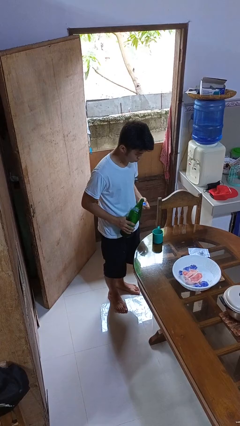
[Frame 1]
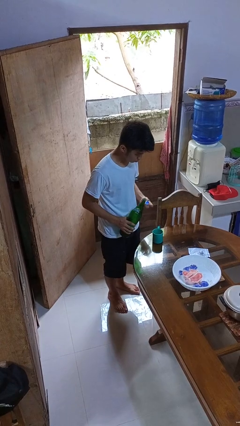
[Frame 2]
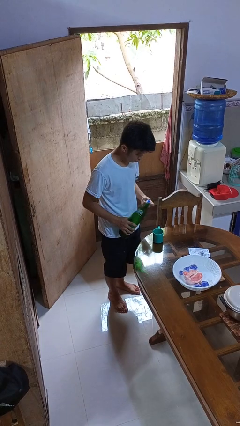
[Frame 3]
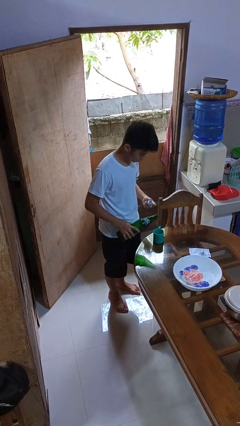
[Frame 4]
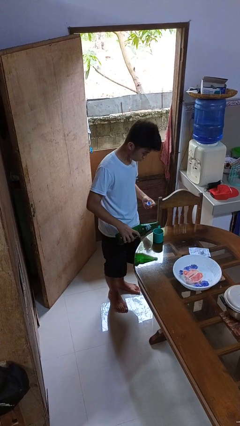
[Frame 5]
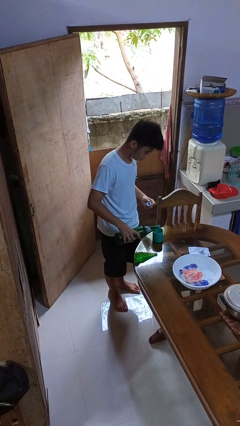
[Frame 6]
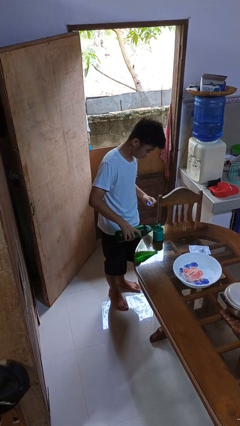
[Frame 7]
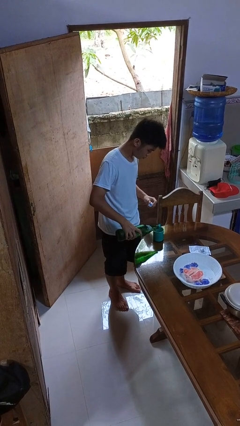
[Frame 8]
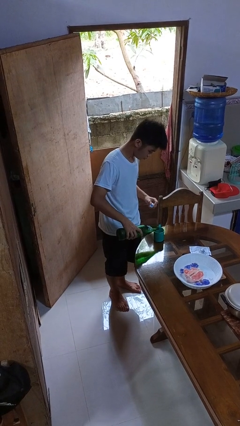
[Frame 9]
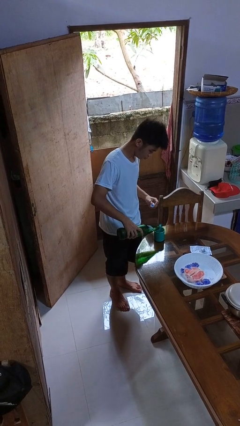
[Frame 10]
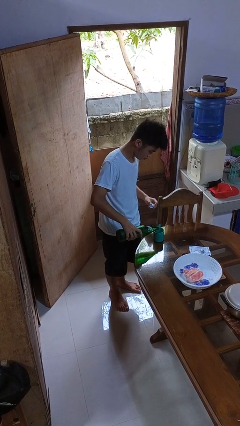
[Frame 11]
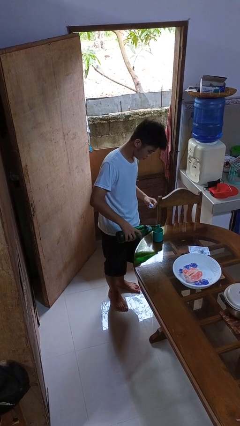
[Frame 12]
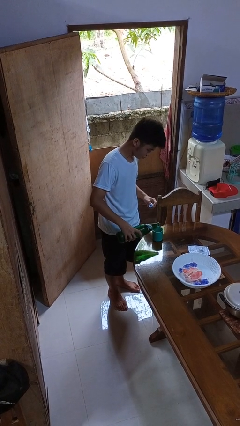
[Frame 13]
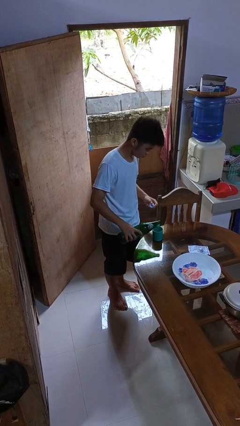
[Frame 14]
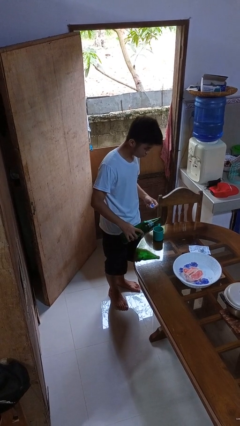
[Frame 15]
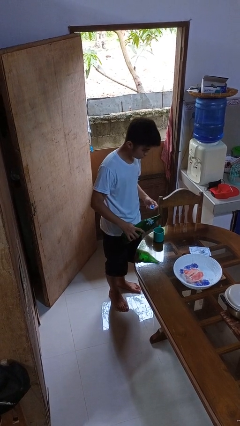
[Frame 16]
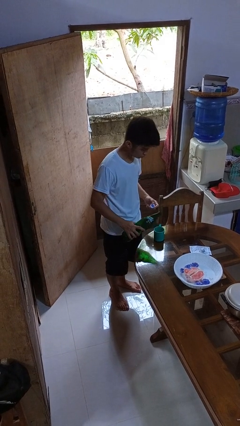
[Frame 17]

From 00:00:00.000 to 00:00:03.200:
person pours liquid into cup

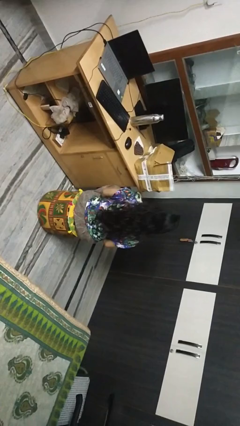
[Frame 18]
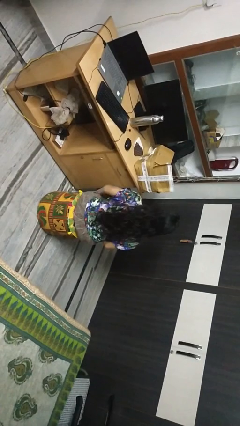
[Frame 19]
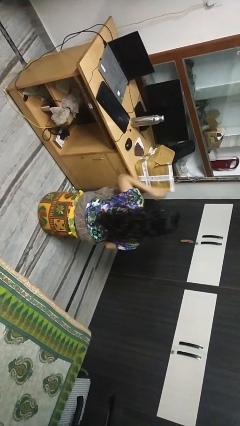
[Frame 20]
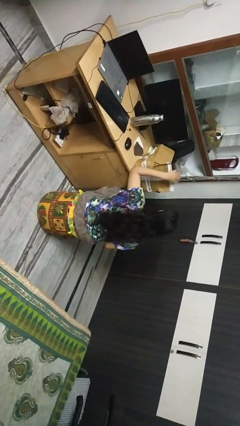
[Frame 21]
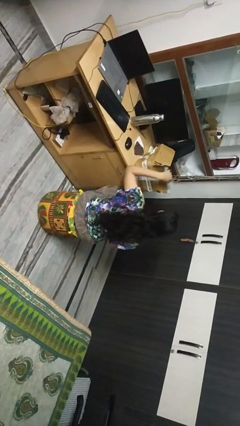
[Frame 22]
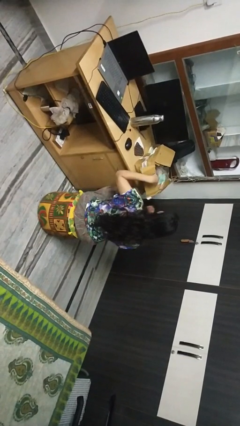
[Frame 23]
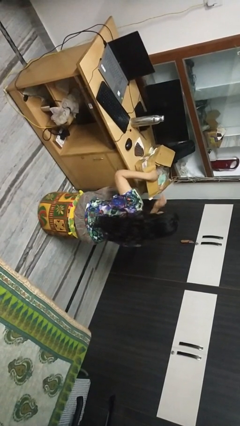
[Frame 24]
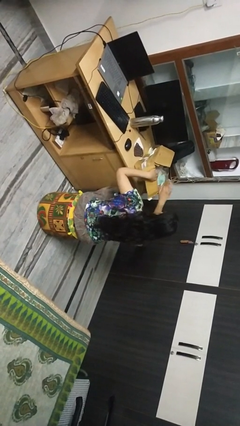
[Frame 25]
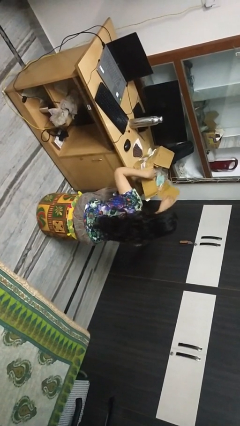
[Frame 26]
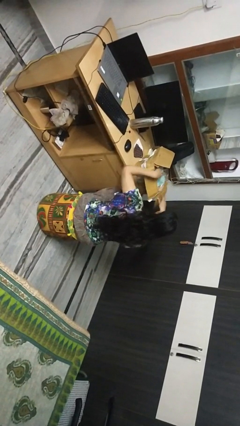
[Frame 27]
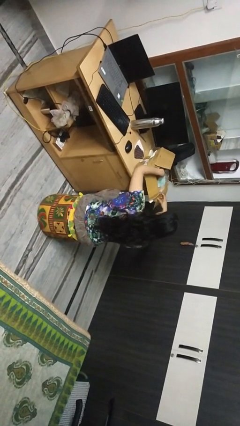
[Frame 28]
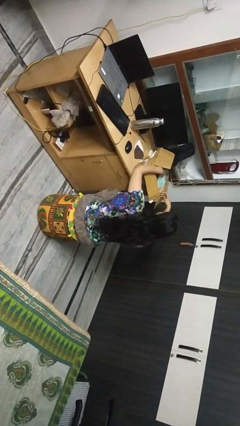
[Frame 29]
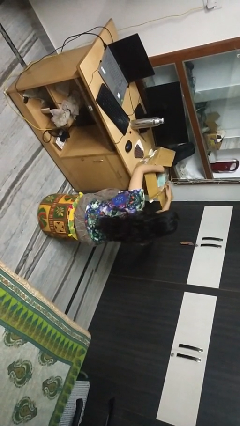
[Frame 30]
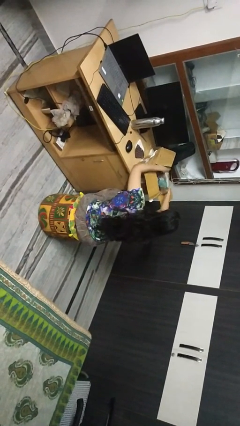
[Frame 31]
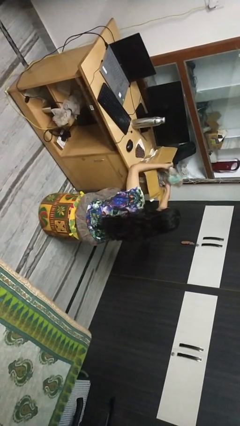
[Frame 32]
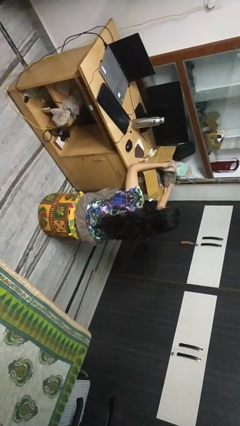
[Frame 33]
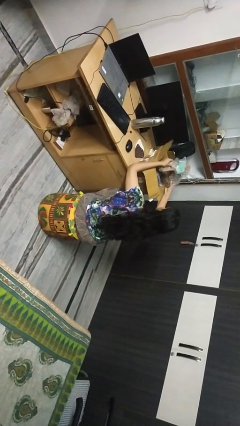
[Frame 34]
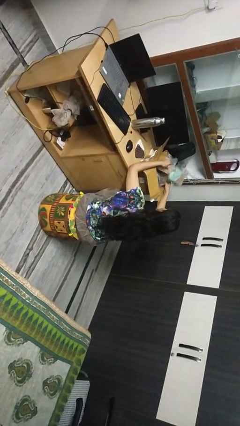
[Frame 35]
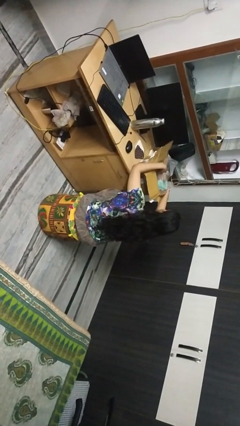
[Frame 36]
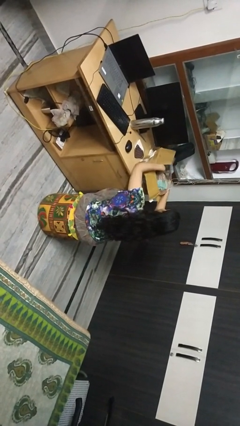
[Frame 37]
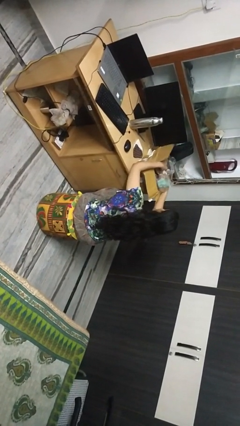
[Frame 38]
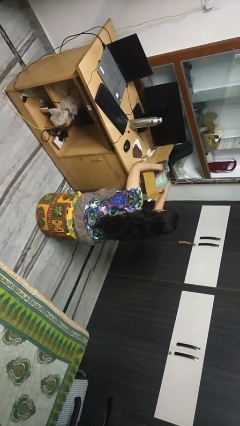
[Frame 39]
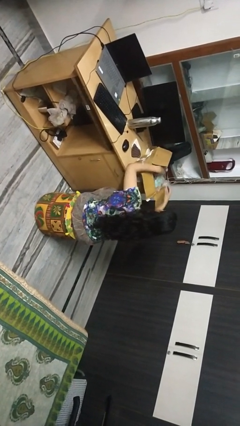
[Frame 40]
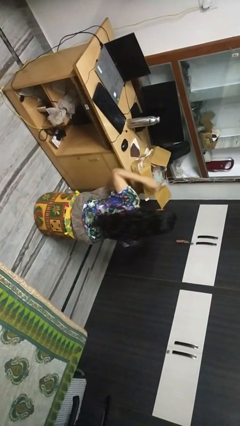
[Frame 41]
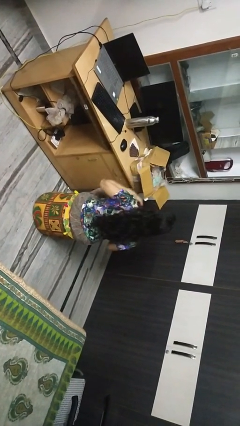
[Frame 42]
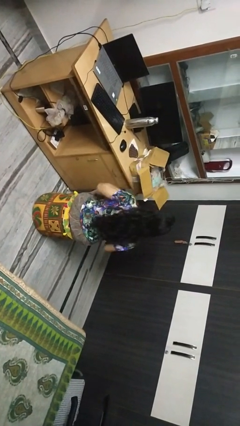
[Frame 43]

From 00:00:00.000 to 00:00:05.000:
person searches in box

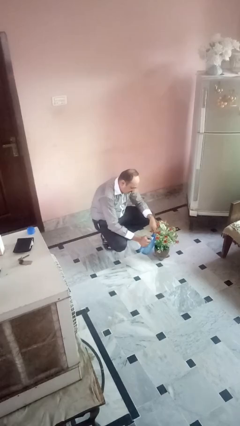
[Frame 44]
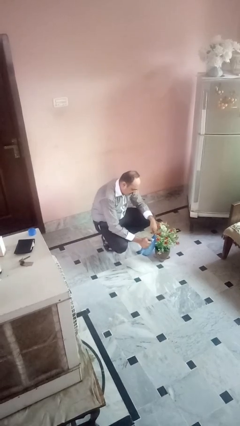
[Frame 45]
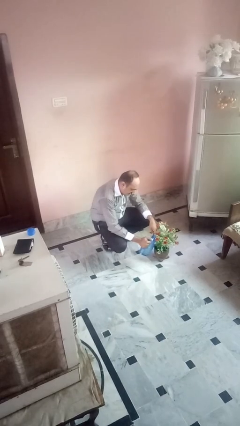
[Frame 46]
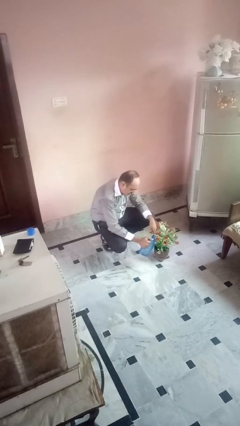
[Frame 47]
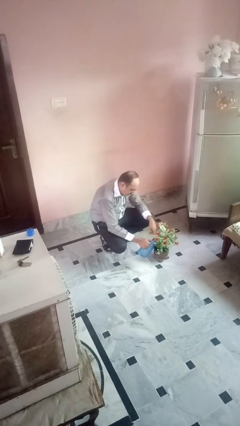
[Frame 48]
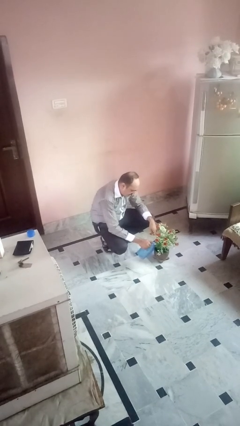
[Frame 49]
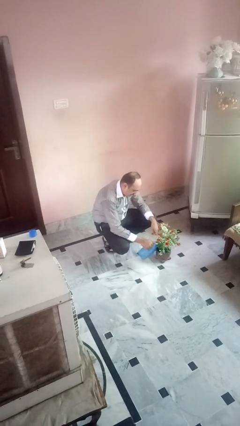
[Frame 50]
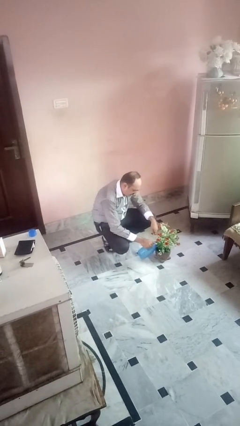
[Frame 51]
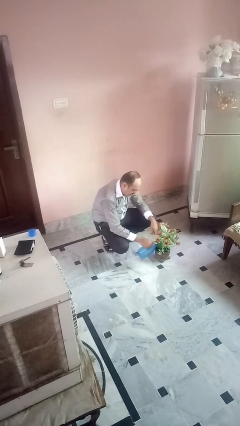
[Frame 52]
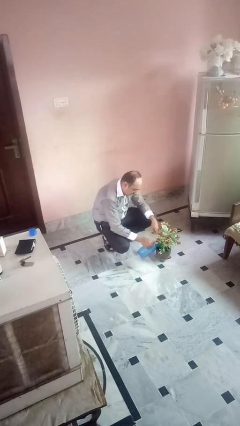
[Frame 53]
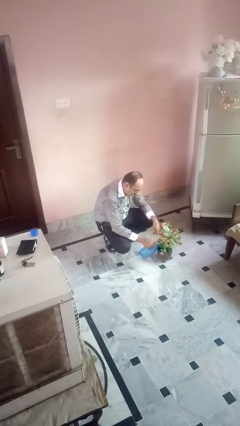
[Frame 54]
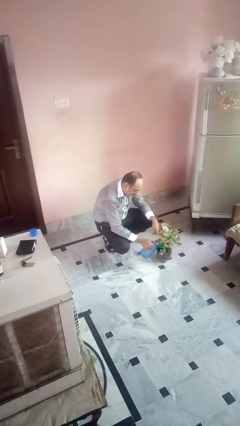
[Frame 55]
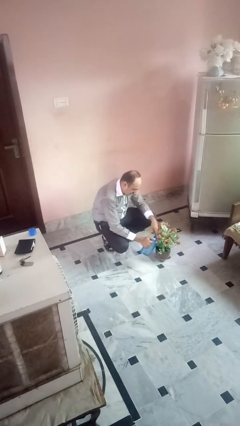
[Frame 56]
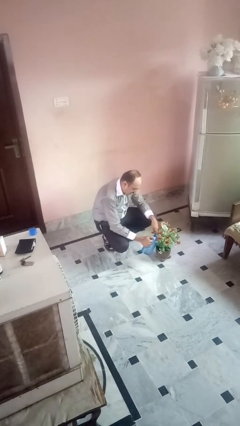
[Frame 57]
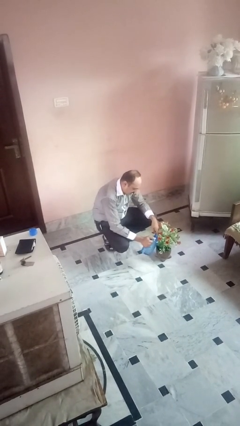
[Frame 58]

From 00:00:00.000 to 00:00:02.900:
person waters houseplant

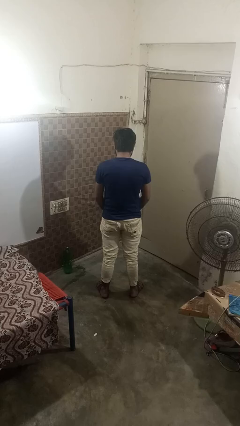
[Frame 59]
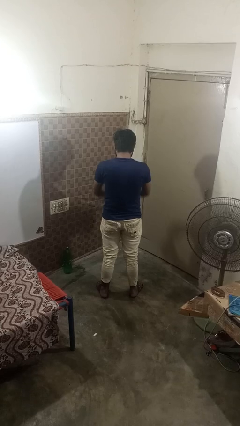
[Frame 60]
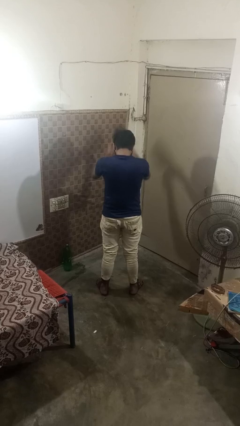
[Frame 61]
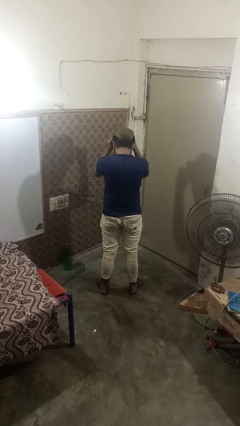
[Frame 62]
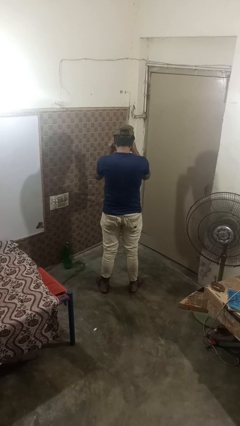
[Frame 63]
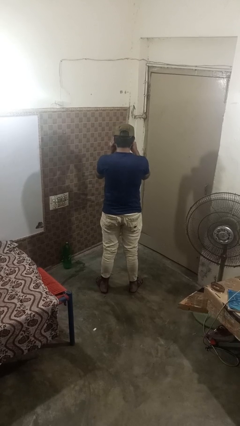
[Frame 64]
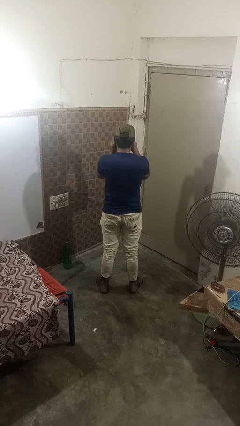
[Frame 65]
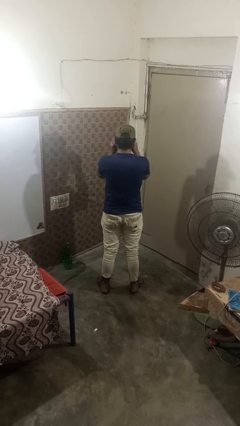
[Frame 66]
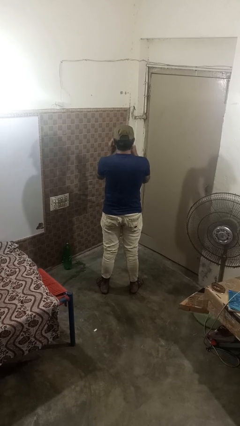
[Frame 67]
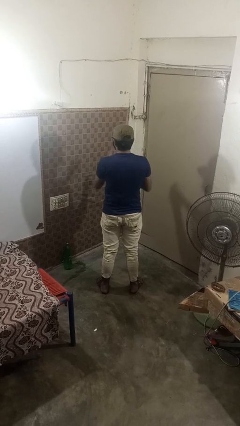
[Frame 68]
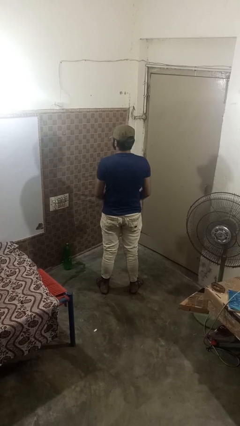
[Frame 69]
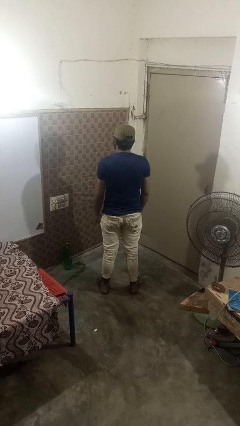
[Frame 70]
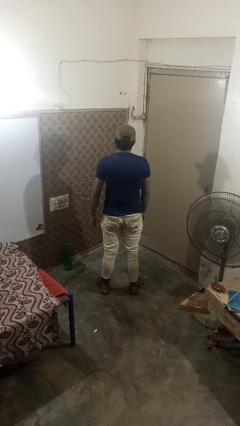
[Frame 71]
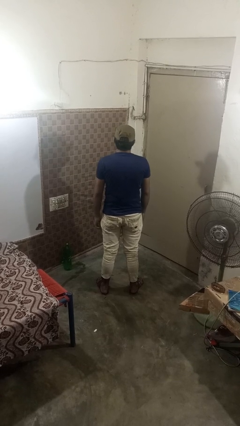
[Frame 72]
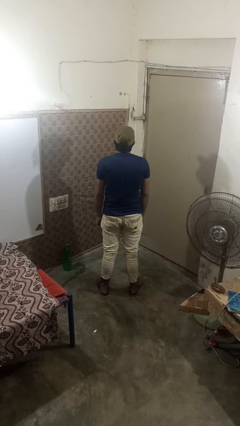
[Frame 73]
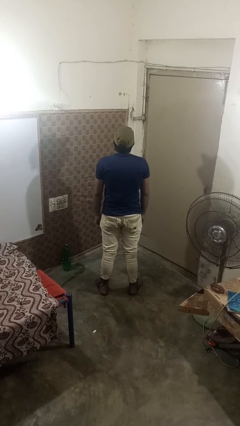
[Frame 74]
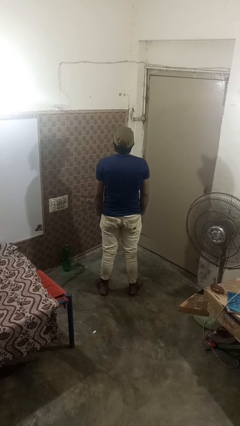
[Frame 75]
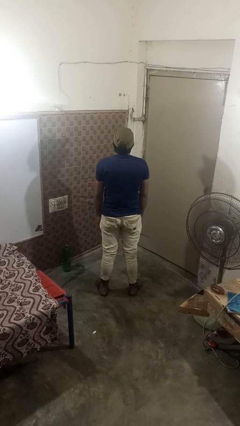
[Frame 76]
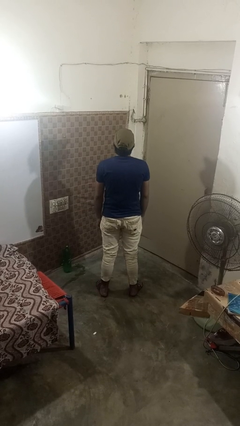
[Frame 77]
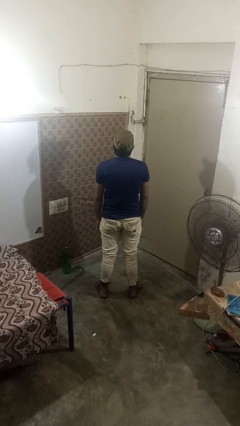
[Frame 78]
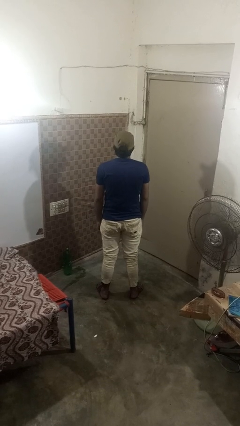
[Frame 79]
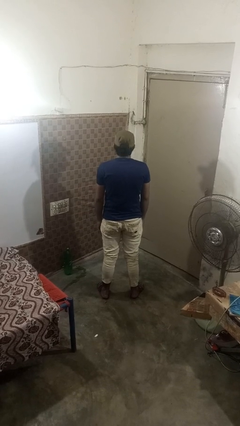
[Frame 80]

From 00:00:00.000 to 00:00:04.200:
person puts on hat

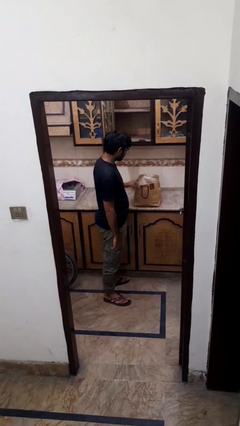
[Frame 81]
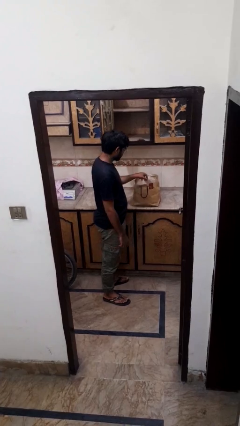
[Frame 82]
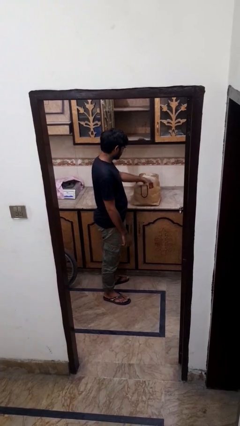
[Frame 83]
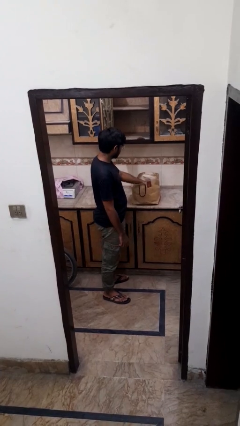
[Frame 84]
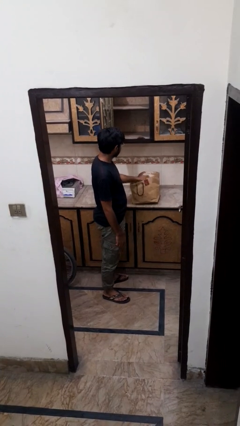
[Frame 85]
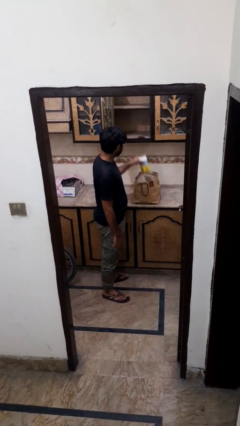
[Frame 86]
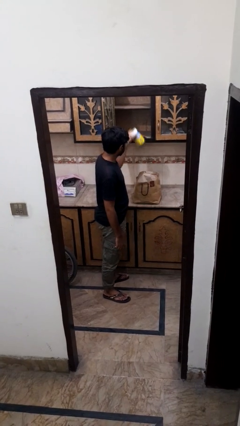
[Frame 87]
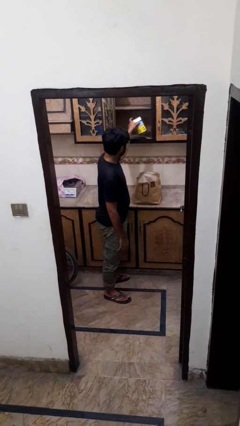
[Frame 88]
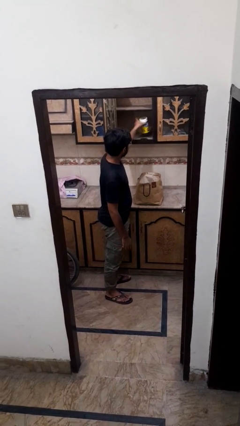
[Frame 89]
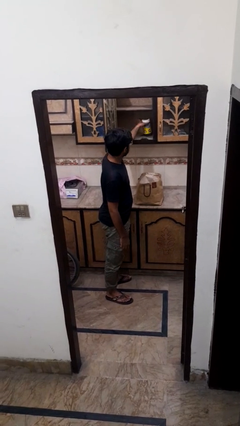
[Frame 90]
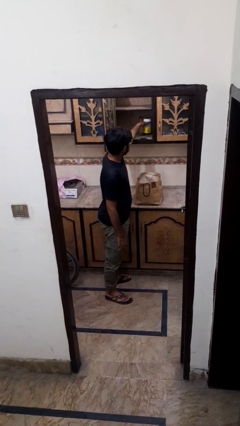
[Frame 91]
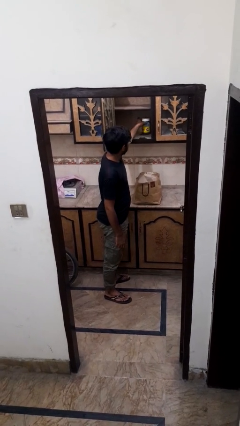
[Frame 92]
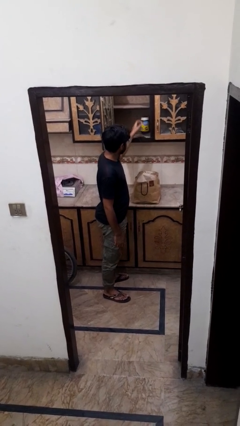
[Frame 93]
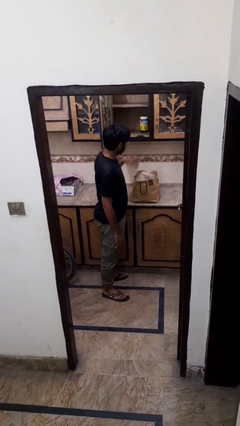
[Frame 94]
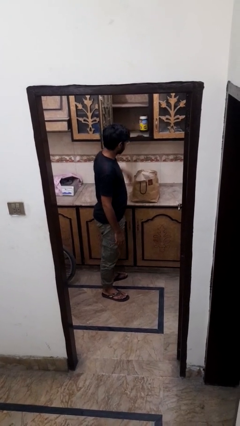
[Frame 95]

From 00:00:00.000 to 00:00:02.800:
person loads groceries into cabinet
